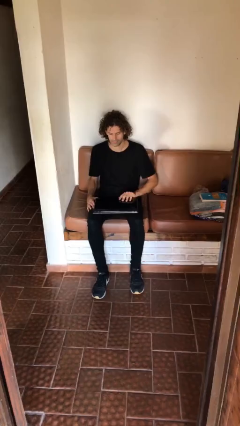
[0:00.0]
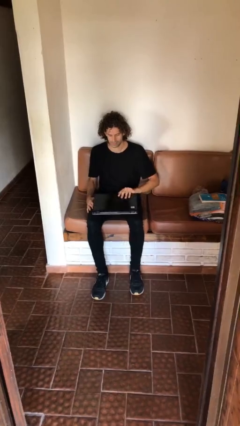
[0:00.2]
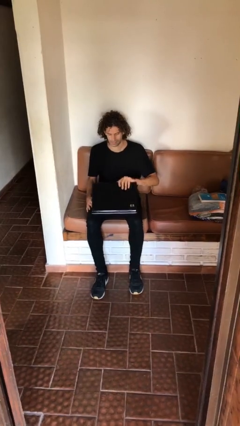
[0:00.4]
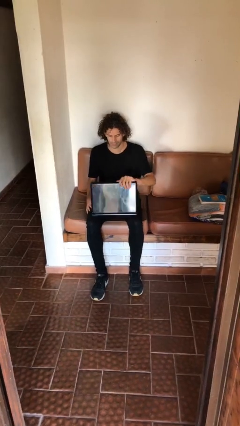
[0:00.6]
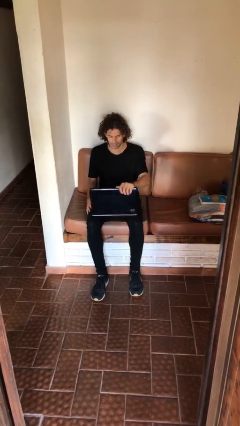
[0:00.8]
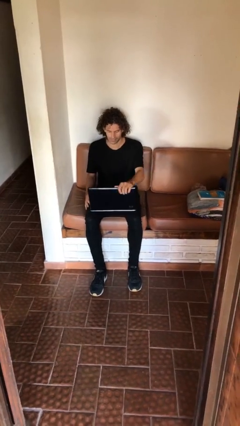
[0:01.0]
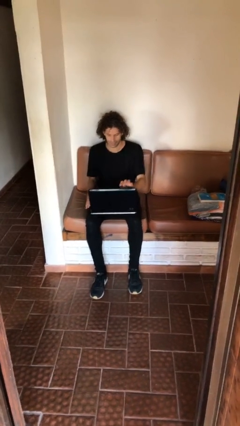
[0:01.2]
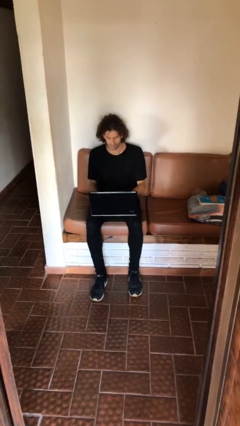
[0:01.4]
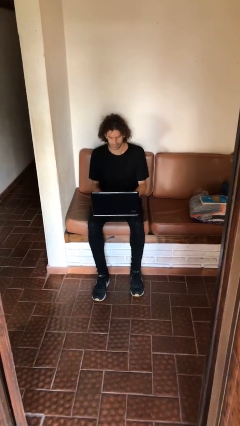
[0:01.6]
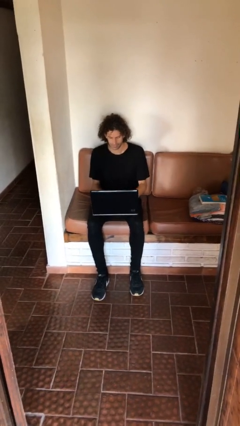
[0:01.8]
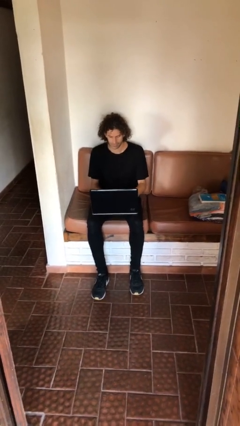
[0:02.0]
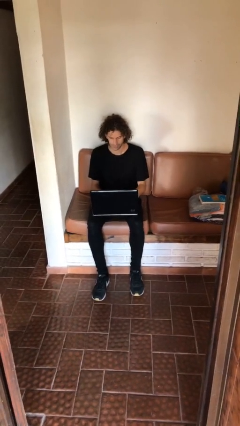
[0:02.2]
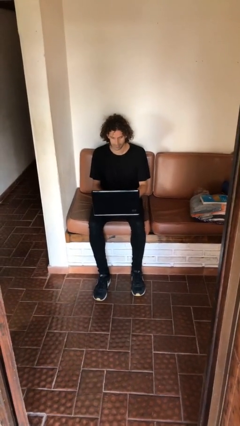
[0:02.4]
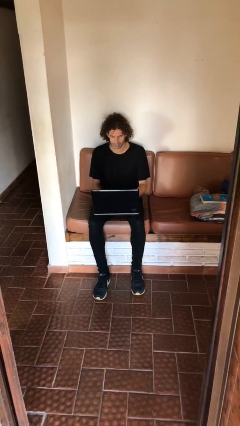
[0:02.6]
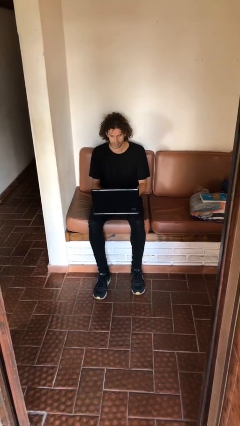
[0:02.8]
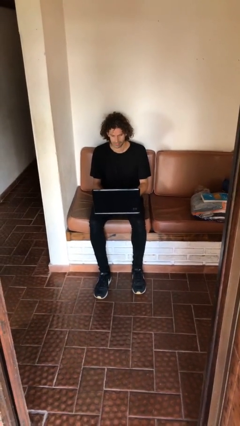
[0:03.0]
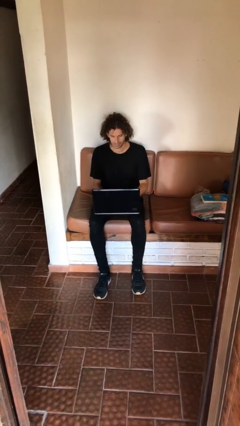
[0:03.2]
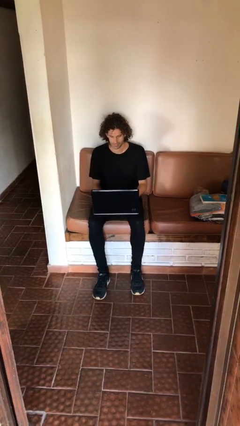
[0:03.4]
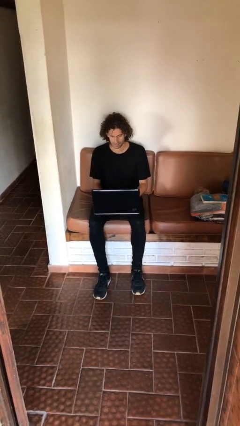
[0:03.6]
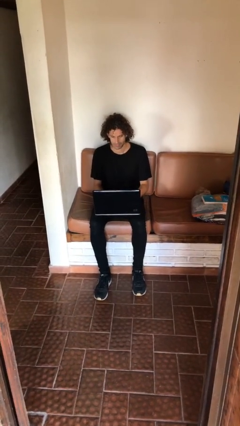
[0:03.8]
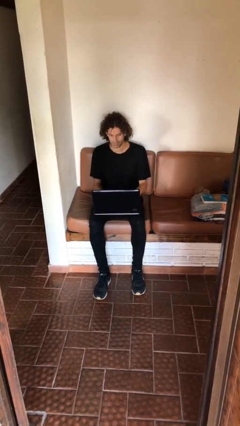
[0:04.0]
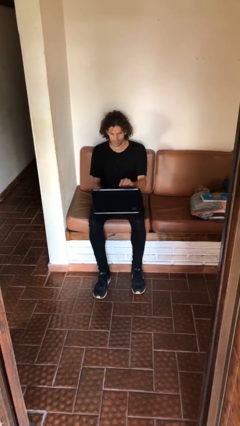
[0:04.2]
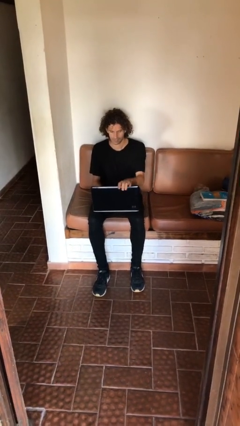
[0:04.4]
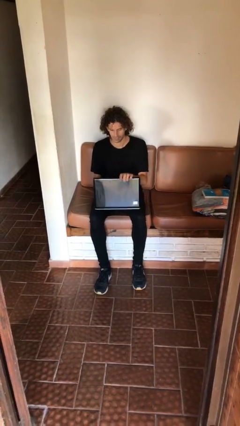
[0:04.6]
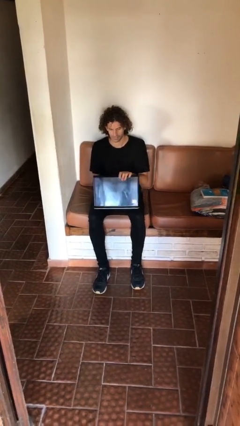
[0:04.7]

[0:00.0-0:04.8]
person interacts with laptop

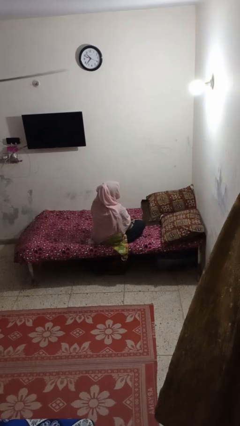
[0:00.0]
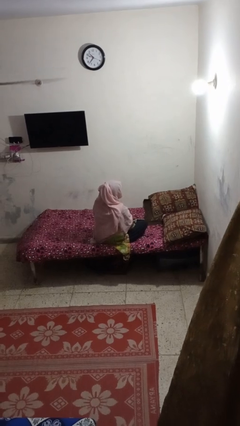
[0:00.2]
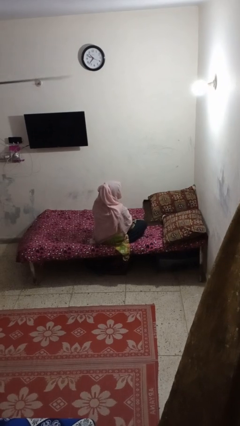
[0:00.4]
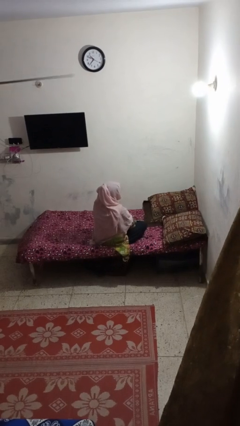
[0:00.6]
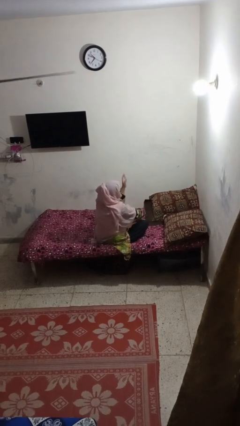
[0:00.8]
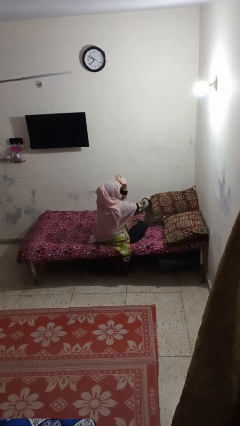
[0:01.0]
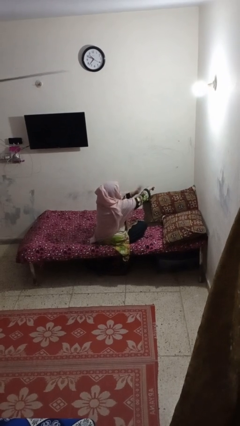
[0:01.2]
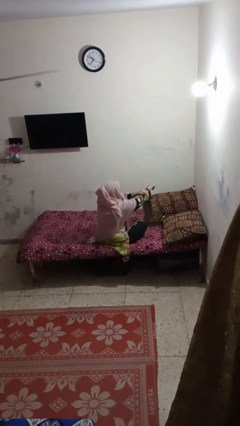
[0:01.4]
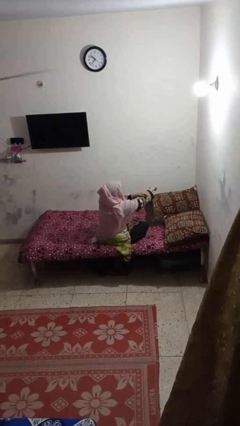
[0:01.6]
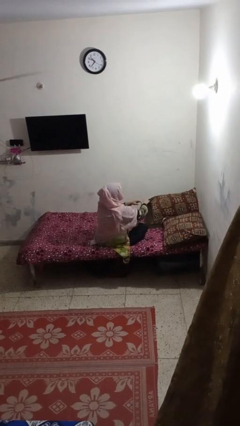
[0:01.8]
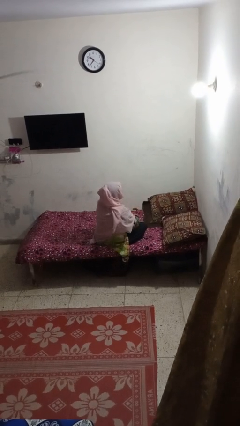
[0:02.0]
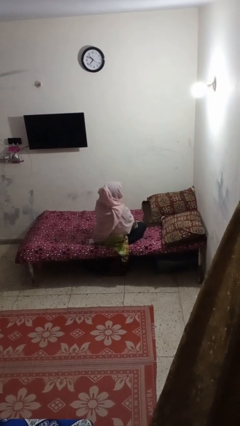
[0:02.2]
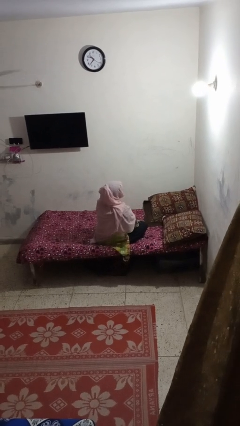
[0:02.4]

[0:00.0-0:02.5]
person swats bug

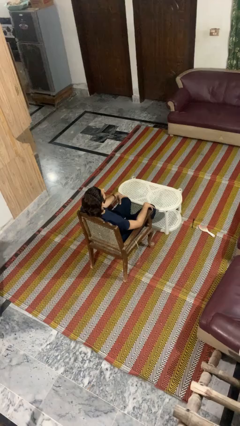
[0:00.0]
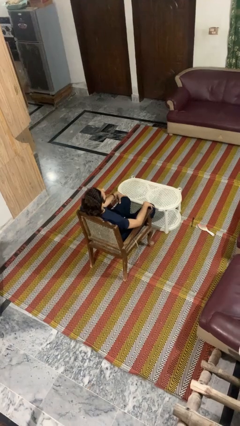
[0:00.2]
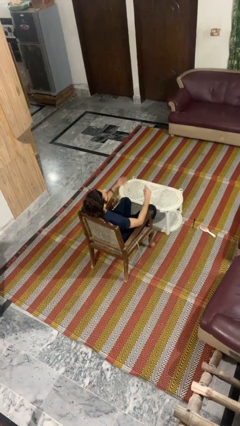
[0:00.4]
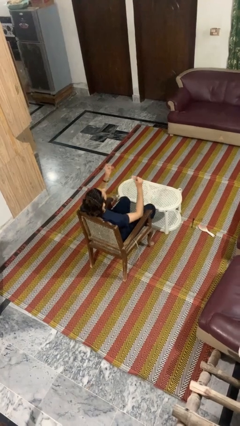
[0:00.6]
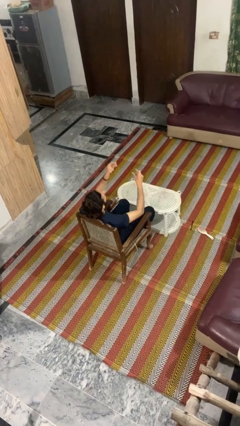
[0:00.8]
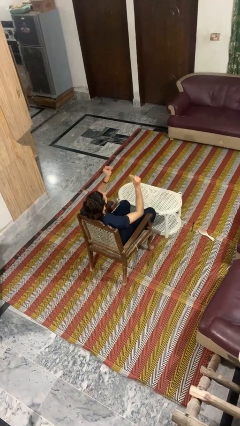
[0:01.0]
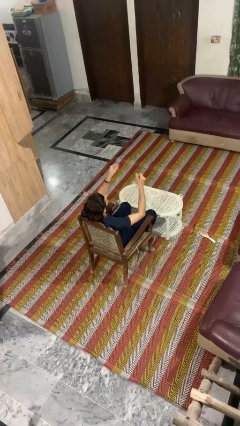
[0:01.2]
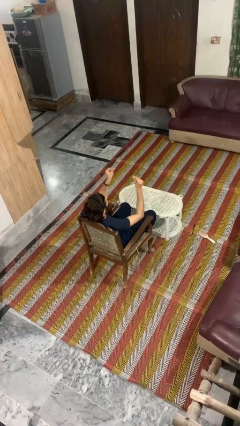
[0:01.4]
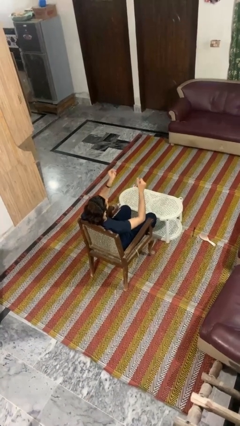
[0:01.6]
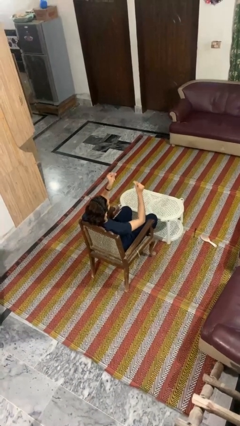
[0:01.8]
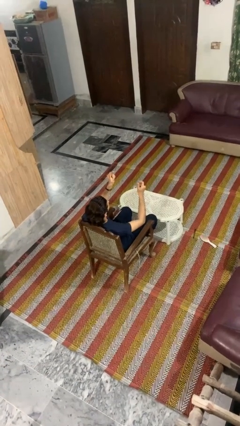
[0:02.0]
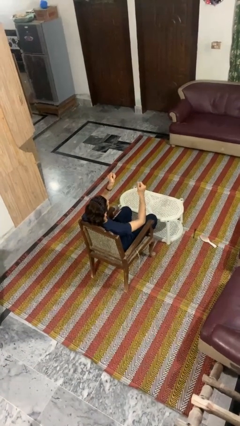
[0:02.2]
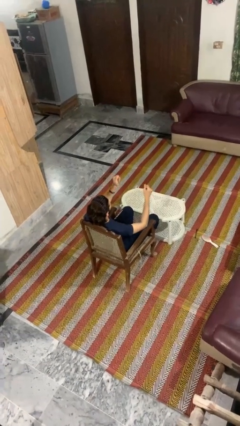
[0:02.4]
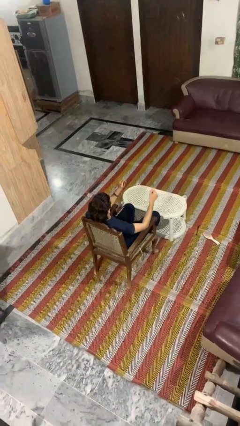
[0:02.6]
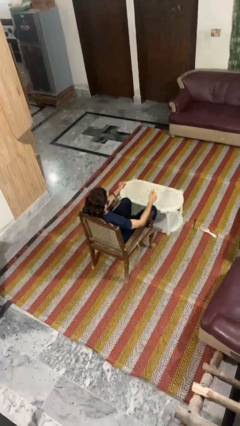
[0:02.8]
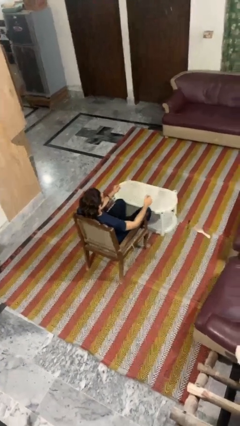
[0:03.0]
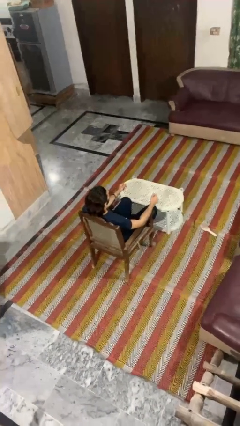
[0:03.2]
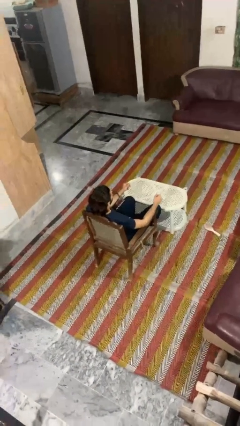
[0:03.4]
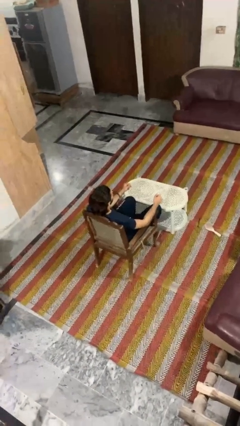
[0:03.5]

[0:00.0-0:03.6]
person snaps fingers

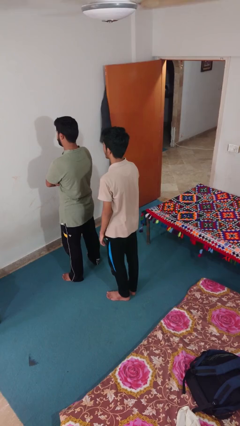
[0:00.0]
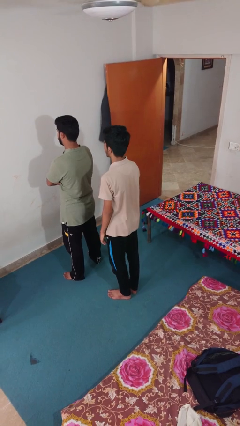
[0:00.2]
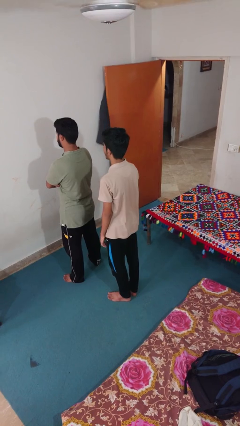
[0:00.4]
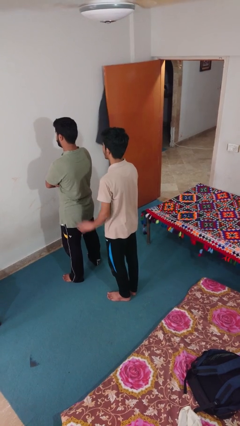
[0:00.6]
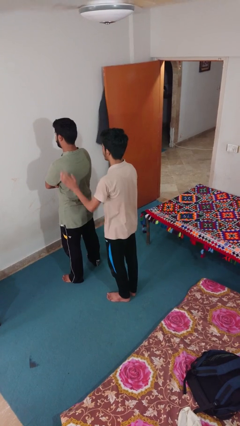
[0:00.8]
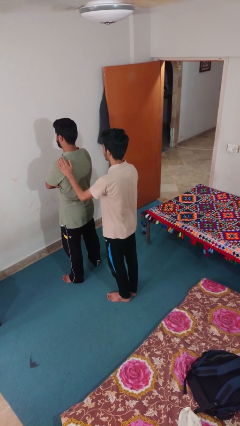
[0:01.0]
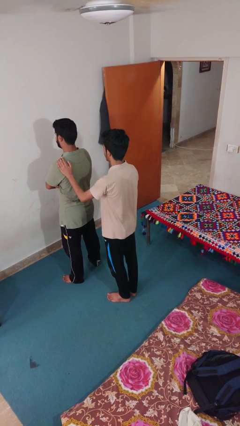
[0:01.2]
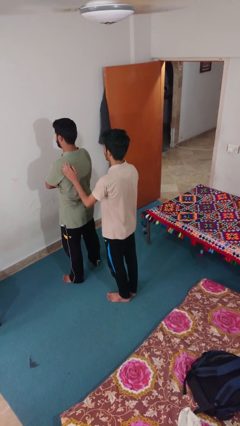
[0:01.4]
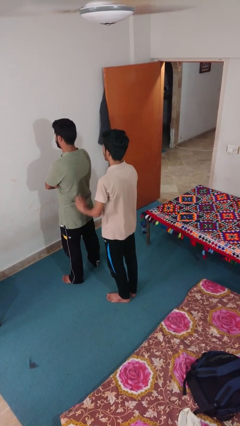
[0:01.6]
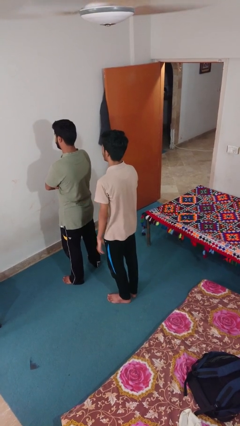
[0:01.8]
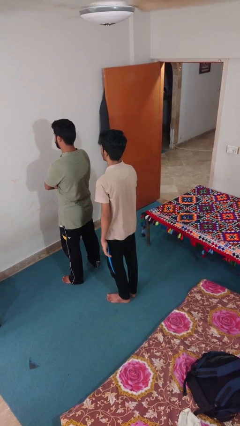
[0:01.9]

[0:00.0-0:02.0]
person touches back of person

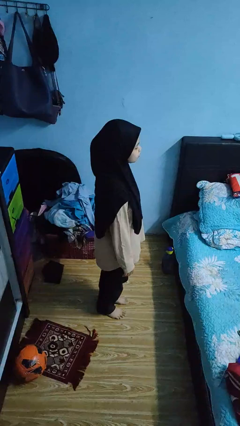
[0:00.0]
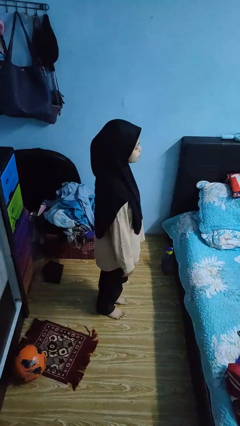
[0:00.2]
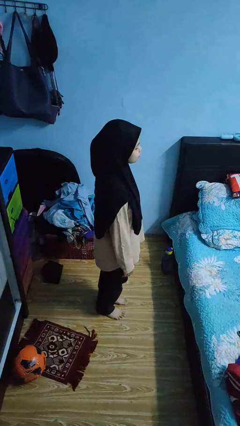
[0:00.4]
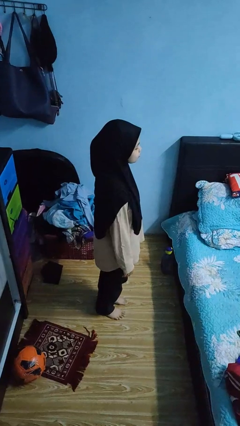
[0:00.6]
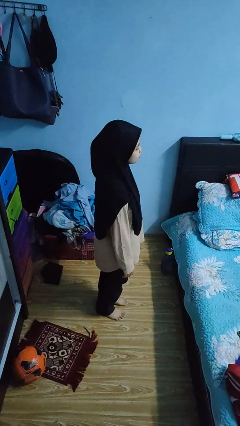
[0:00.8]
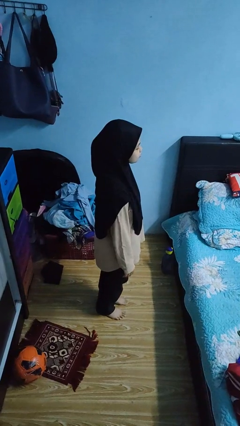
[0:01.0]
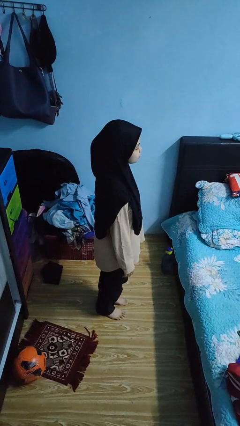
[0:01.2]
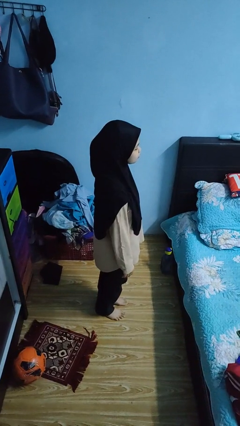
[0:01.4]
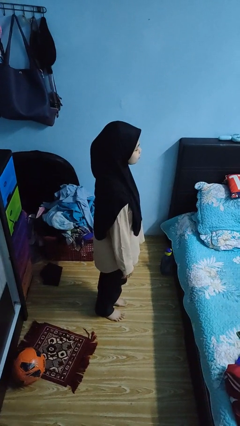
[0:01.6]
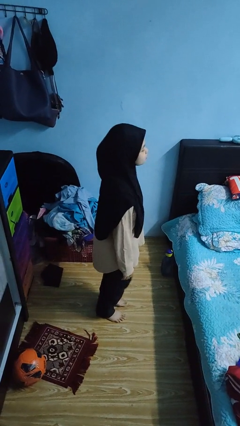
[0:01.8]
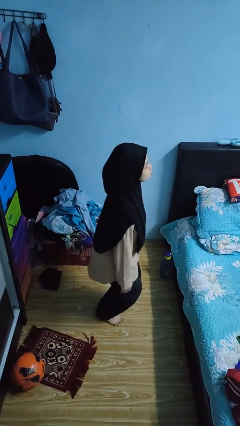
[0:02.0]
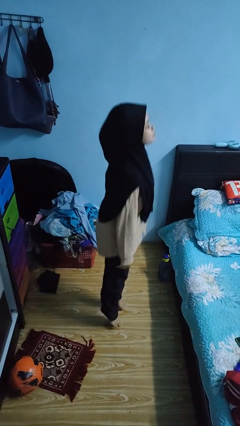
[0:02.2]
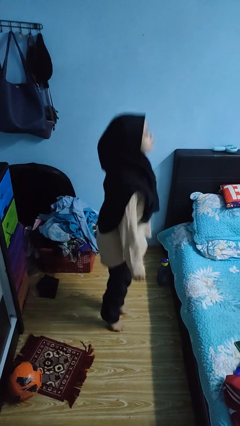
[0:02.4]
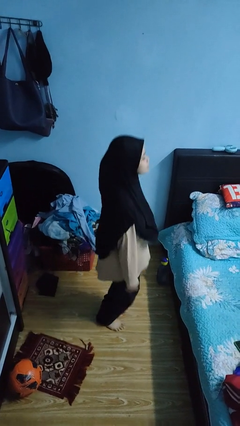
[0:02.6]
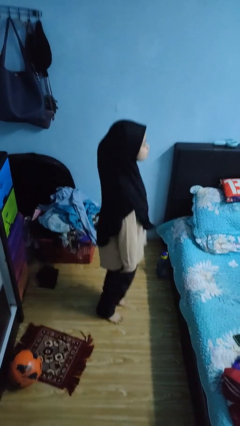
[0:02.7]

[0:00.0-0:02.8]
person jumps

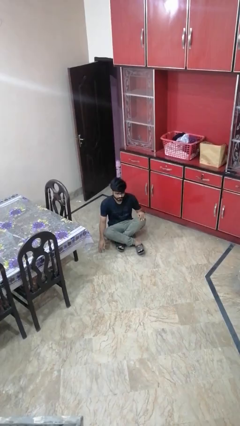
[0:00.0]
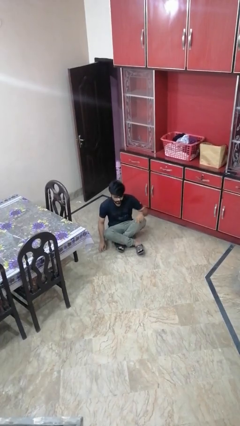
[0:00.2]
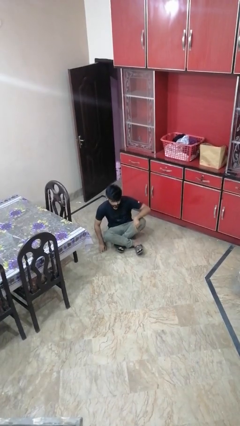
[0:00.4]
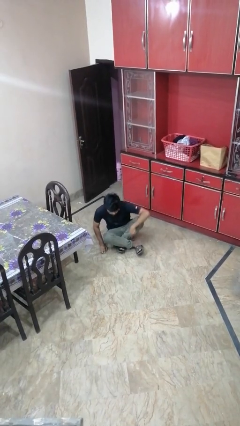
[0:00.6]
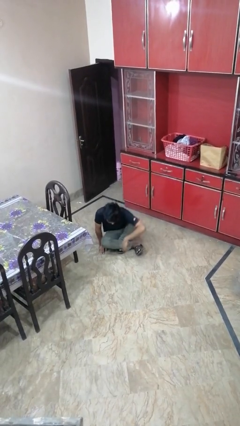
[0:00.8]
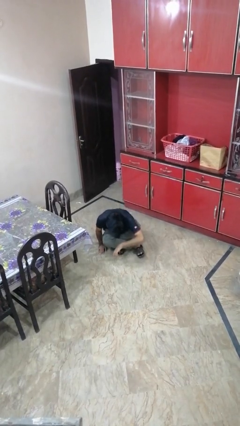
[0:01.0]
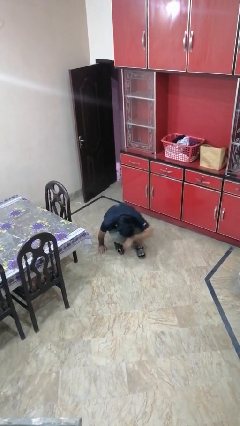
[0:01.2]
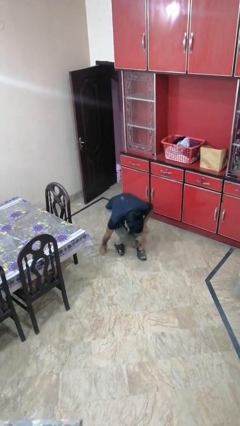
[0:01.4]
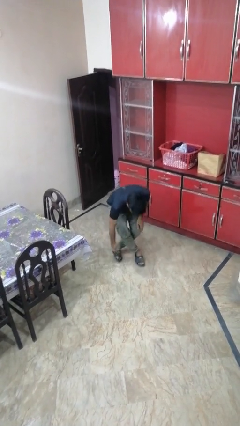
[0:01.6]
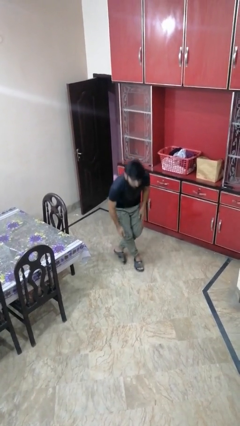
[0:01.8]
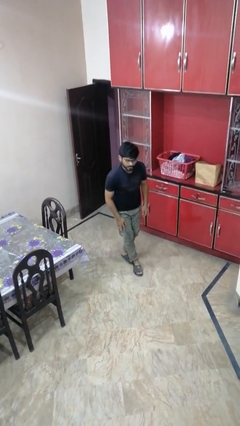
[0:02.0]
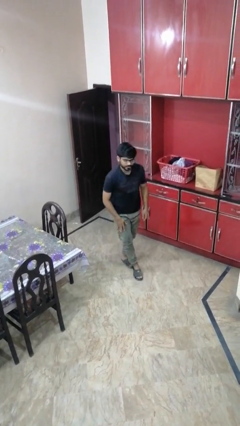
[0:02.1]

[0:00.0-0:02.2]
person stands up from floor

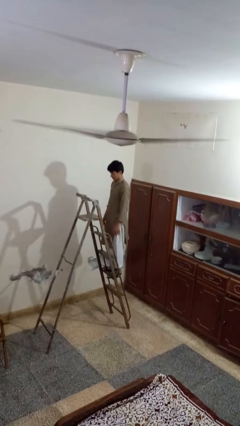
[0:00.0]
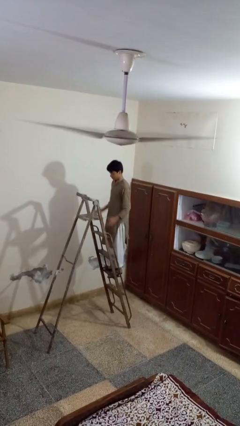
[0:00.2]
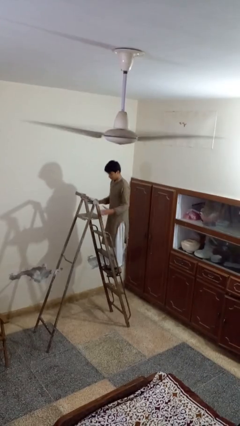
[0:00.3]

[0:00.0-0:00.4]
person climbs down ladder
